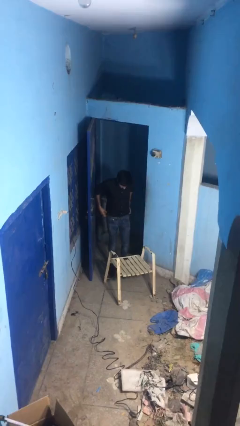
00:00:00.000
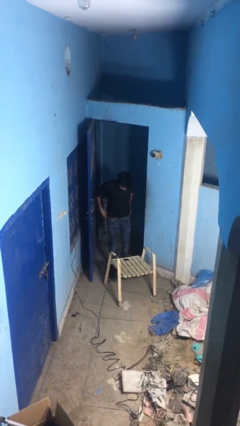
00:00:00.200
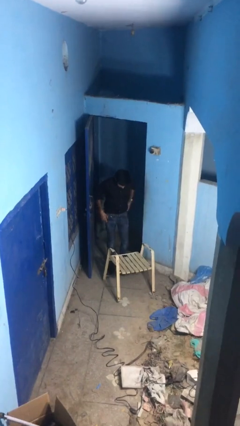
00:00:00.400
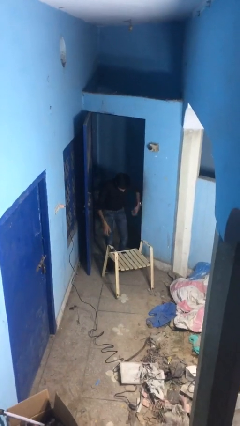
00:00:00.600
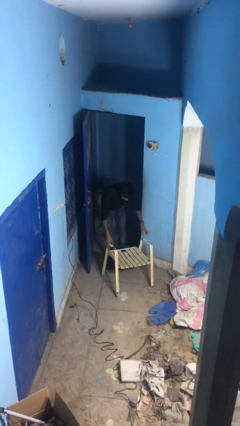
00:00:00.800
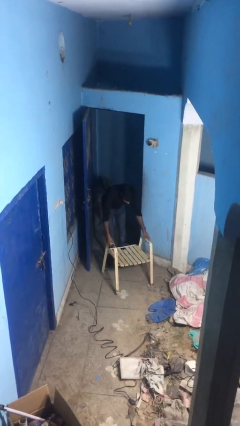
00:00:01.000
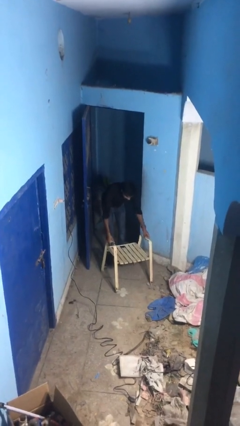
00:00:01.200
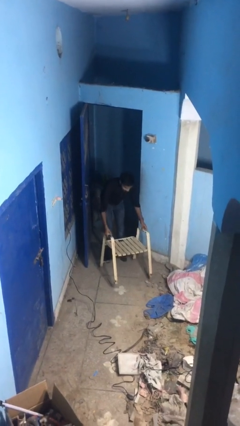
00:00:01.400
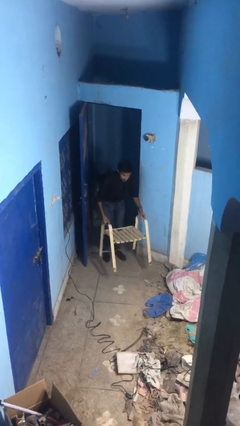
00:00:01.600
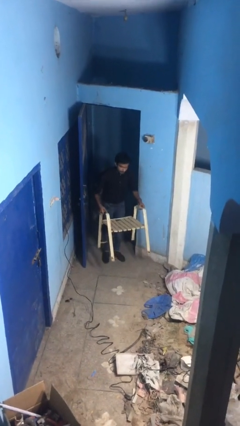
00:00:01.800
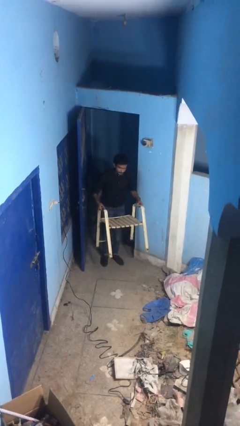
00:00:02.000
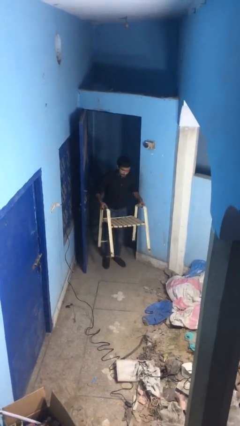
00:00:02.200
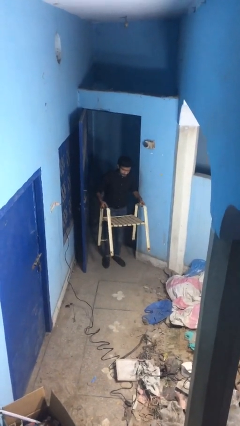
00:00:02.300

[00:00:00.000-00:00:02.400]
person picks up object from floor

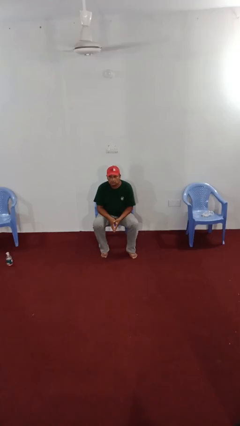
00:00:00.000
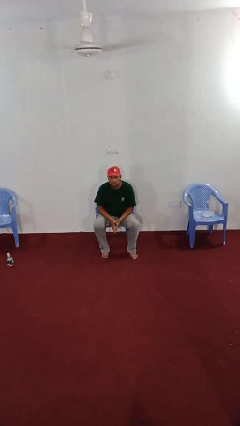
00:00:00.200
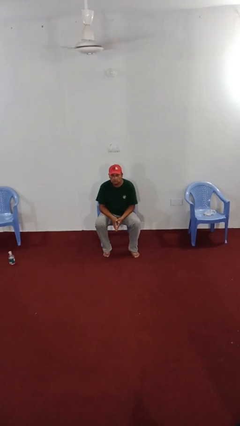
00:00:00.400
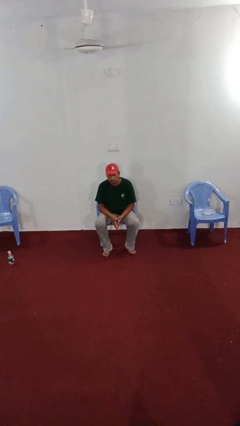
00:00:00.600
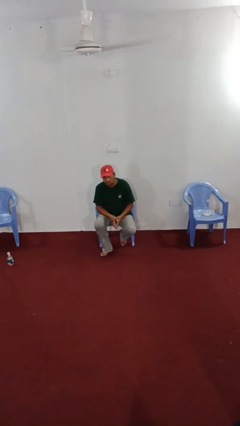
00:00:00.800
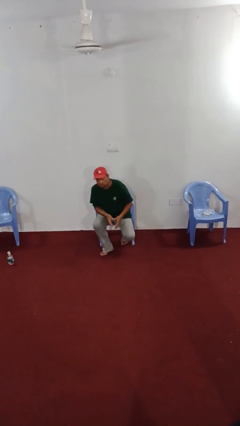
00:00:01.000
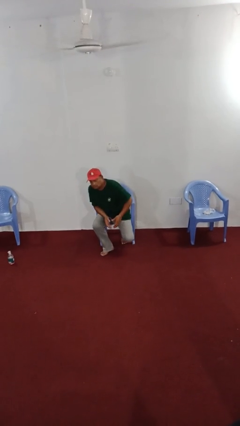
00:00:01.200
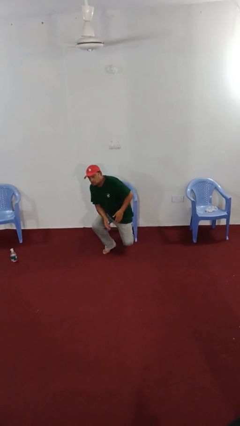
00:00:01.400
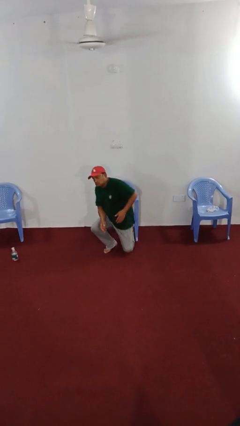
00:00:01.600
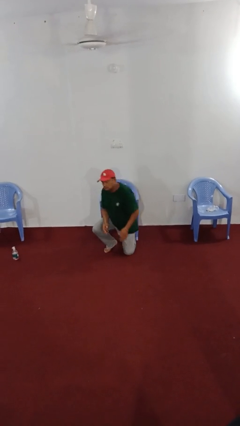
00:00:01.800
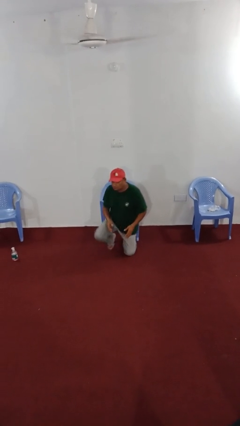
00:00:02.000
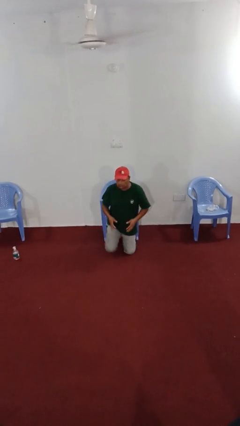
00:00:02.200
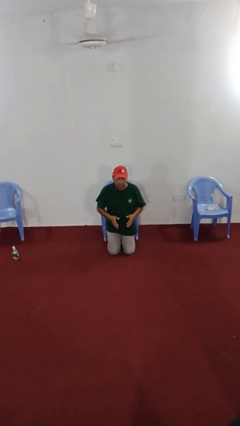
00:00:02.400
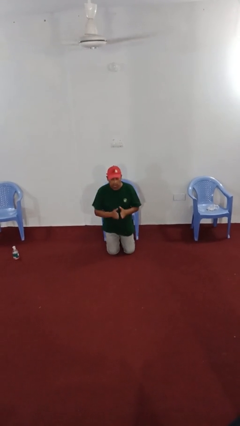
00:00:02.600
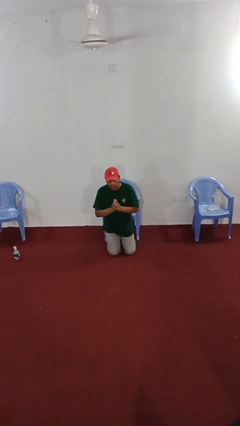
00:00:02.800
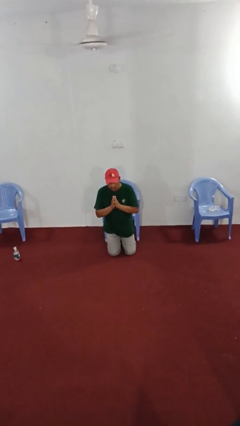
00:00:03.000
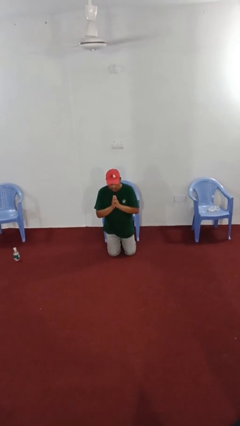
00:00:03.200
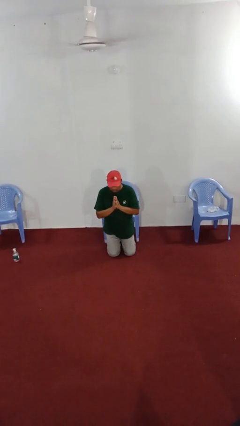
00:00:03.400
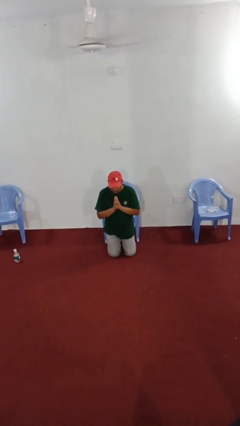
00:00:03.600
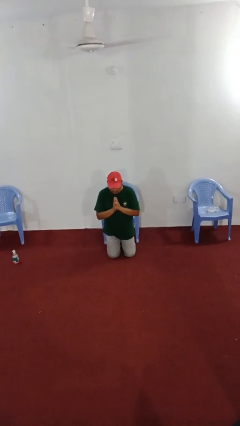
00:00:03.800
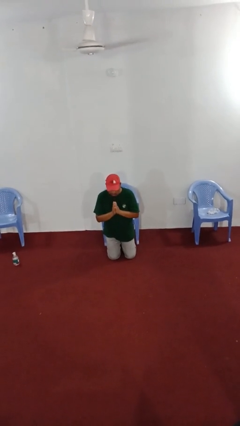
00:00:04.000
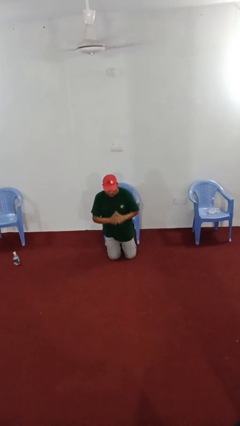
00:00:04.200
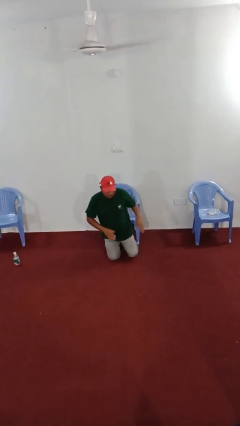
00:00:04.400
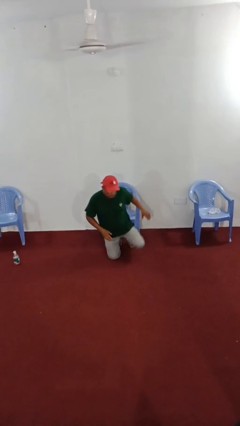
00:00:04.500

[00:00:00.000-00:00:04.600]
person prays

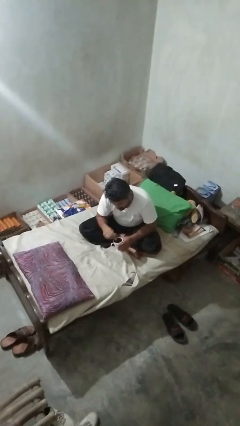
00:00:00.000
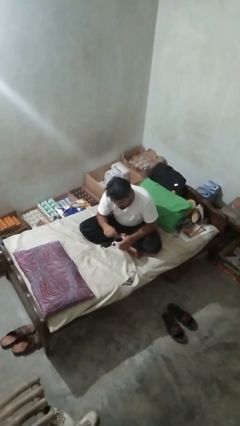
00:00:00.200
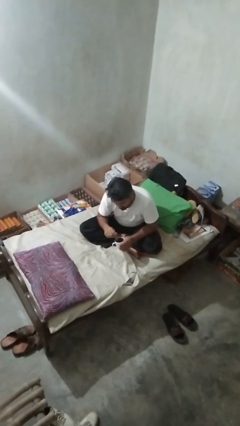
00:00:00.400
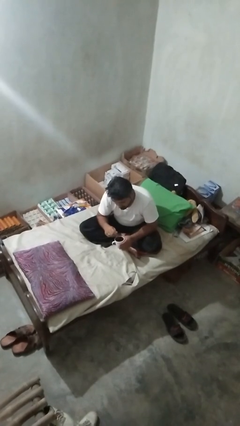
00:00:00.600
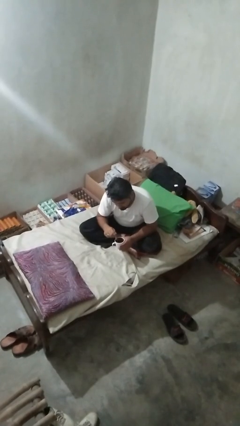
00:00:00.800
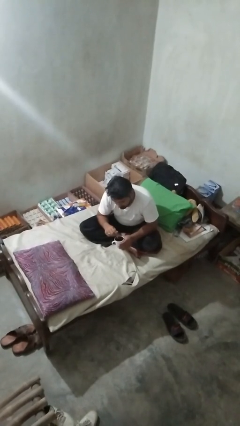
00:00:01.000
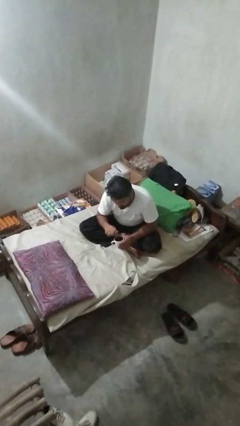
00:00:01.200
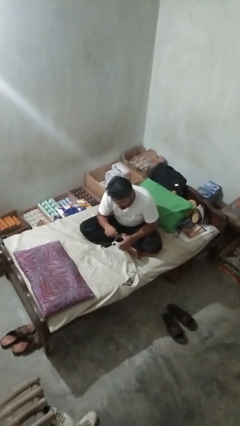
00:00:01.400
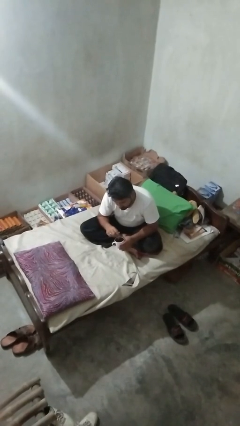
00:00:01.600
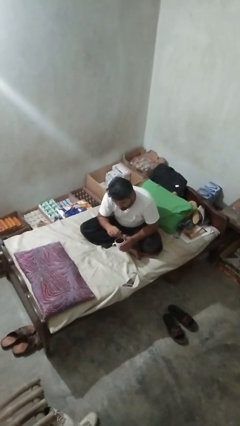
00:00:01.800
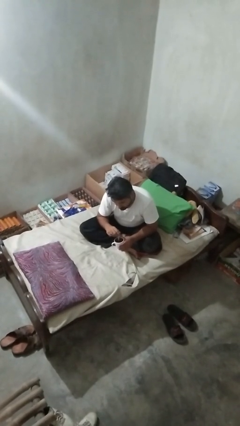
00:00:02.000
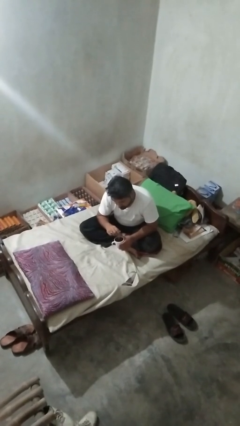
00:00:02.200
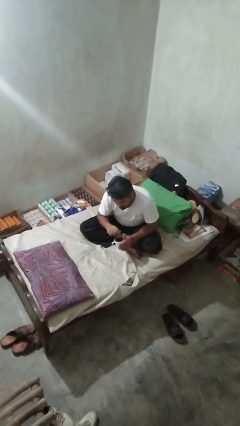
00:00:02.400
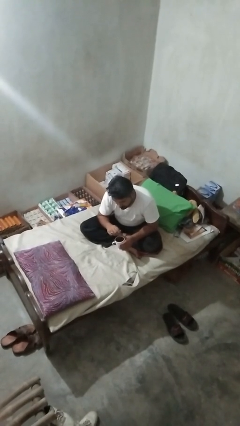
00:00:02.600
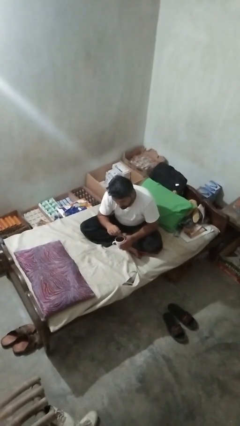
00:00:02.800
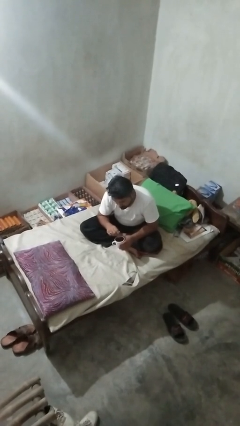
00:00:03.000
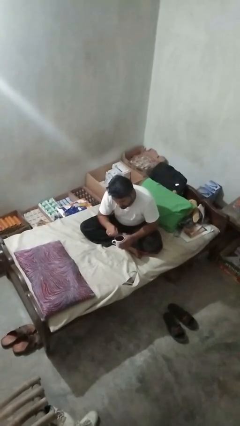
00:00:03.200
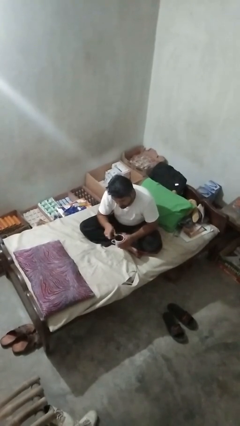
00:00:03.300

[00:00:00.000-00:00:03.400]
person stirs mug

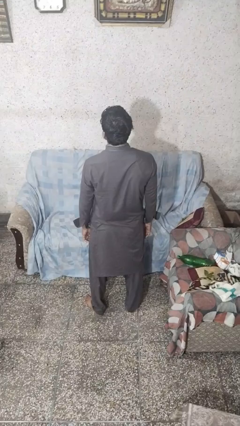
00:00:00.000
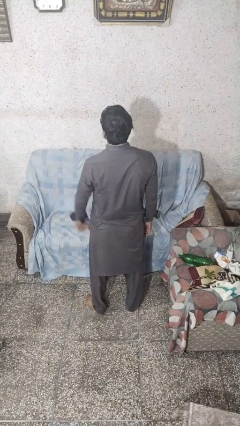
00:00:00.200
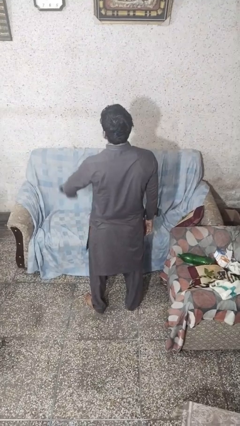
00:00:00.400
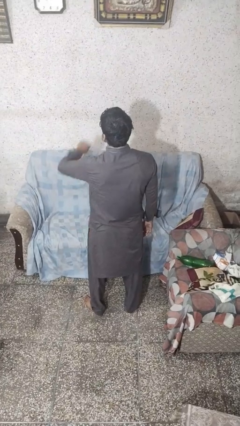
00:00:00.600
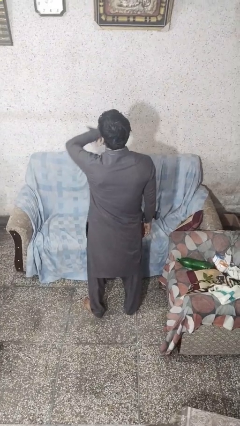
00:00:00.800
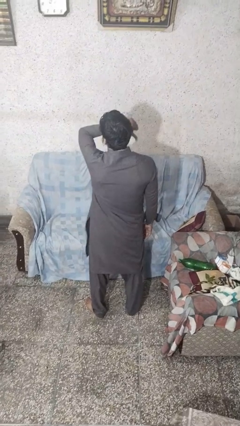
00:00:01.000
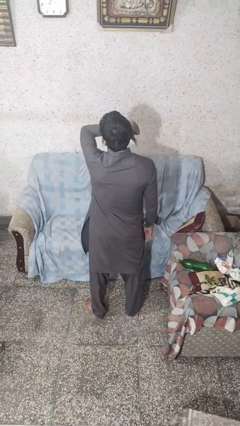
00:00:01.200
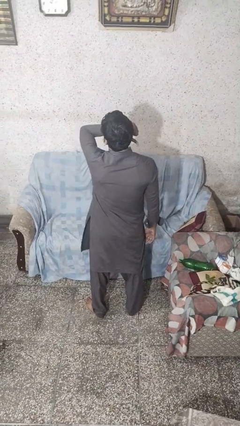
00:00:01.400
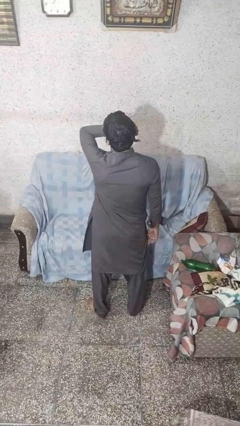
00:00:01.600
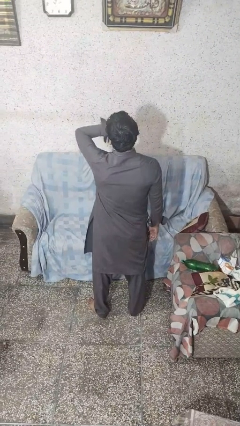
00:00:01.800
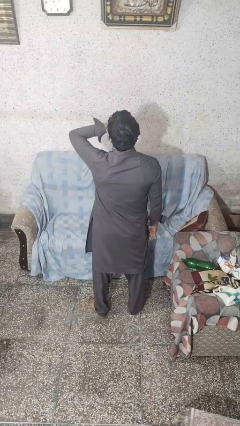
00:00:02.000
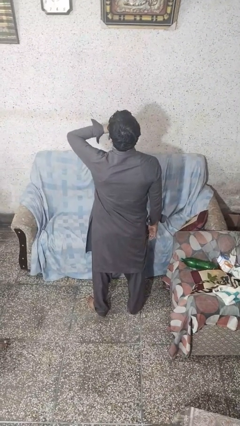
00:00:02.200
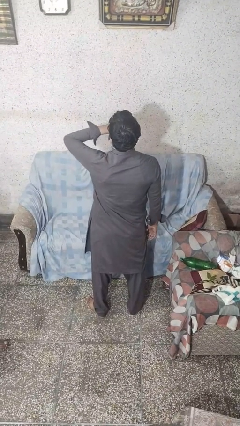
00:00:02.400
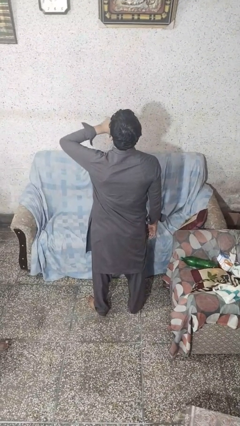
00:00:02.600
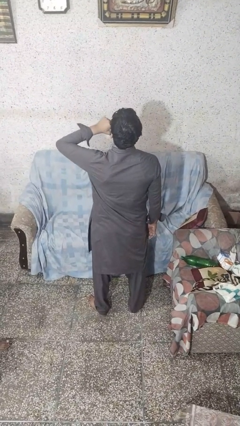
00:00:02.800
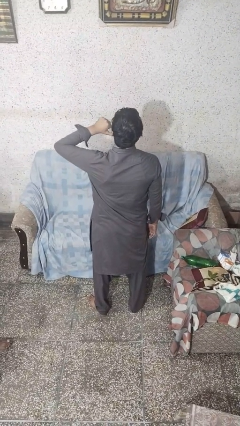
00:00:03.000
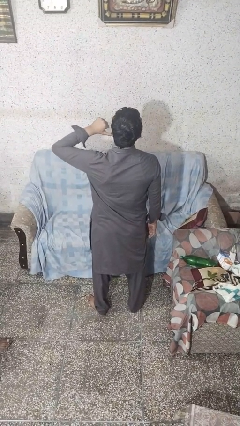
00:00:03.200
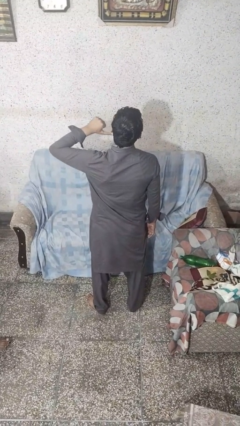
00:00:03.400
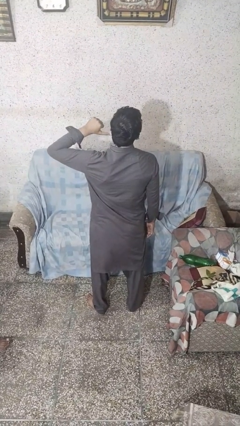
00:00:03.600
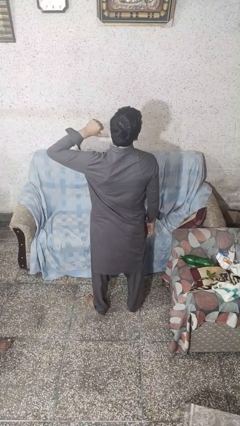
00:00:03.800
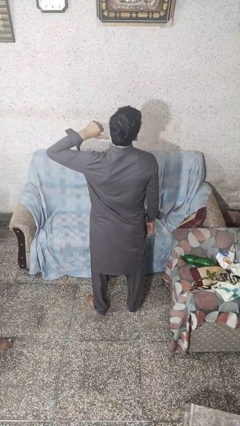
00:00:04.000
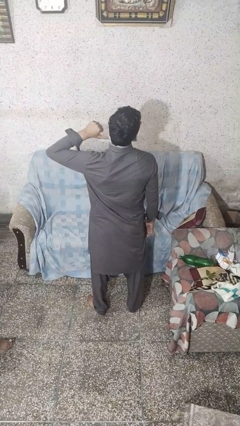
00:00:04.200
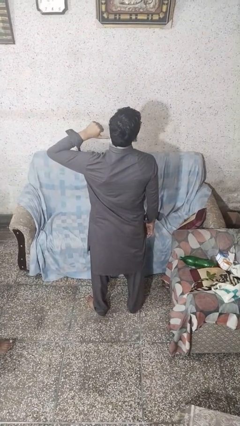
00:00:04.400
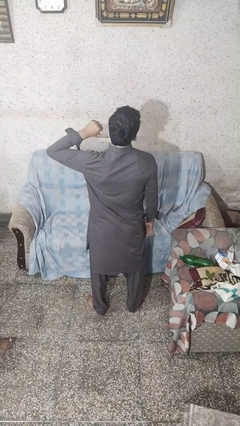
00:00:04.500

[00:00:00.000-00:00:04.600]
person gestures cut

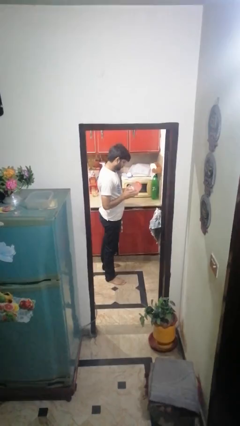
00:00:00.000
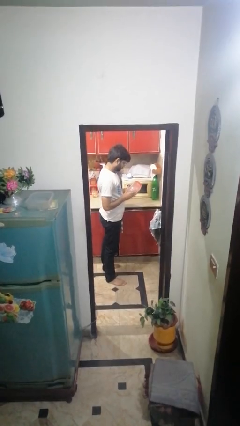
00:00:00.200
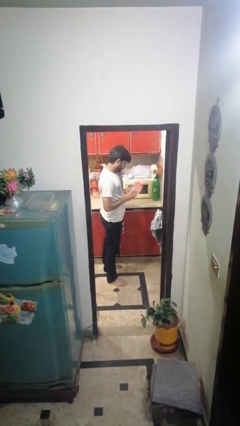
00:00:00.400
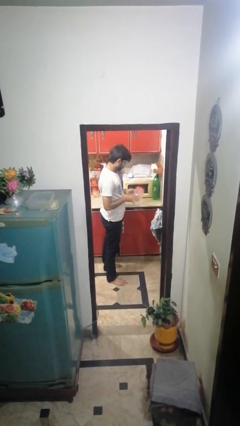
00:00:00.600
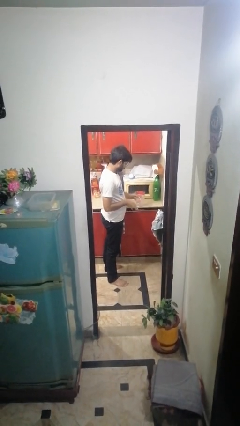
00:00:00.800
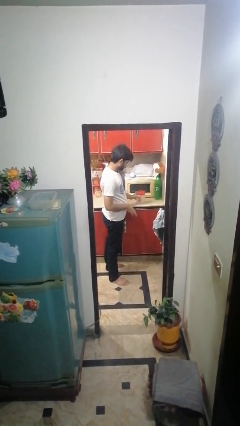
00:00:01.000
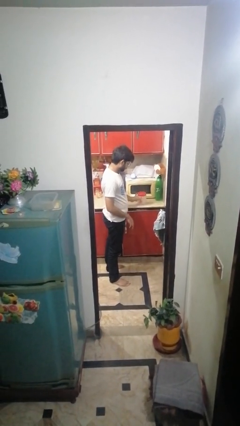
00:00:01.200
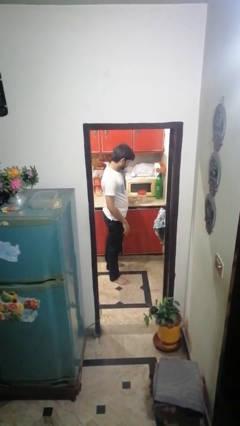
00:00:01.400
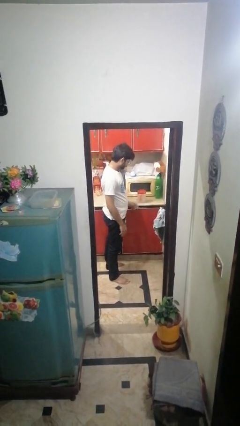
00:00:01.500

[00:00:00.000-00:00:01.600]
person puts down object on countertop

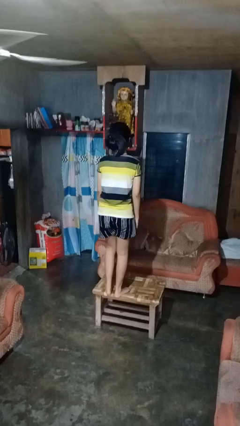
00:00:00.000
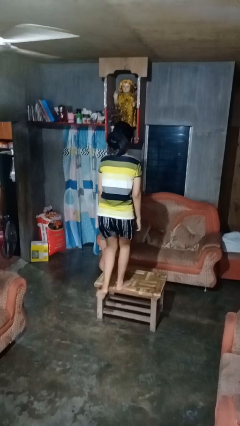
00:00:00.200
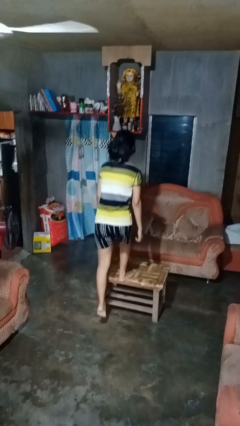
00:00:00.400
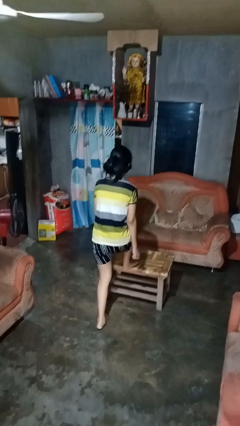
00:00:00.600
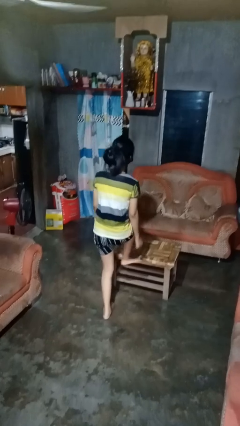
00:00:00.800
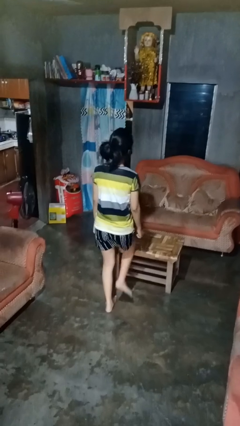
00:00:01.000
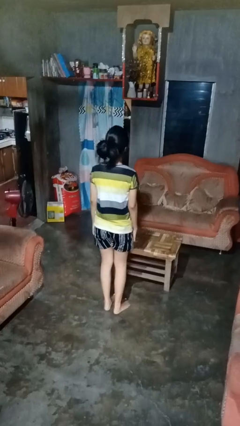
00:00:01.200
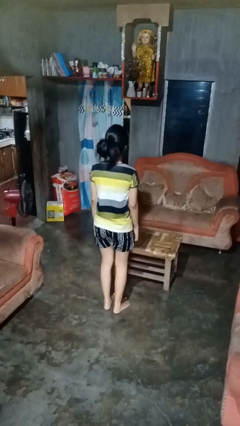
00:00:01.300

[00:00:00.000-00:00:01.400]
person climbs off table
